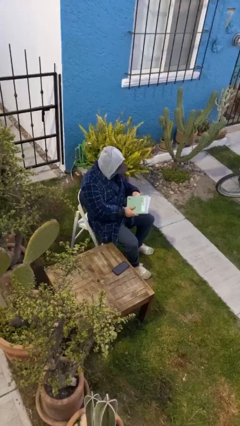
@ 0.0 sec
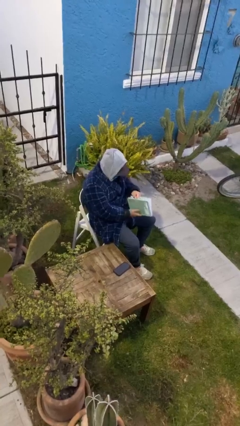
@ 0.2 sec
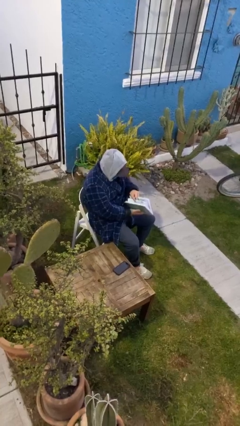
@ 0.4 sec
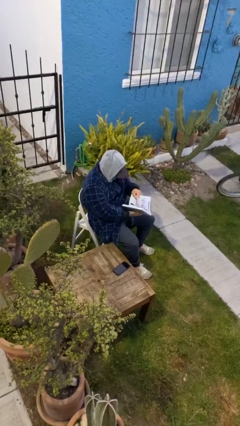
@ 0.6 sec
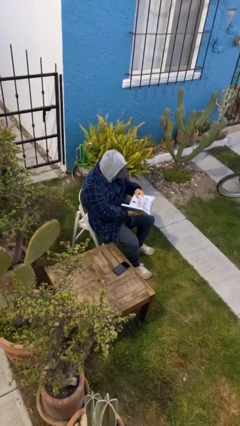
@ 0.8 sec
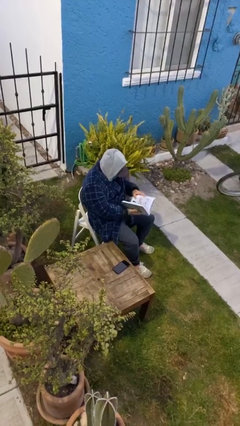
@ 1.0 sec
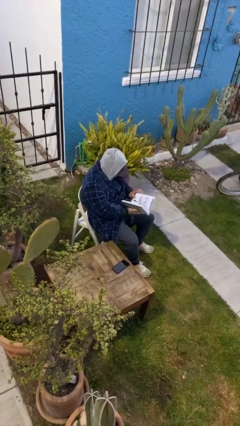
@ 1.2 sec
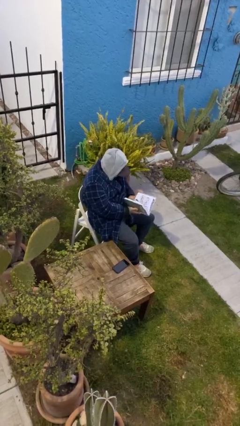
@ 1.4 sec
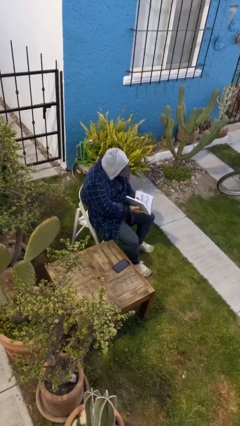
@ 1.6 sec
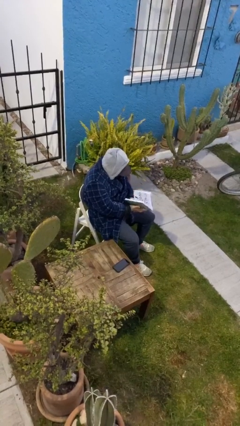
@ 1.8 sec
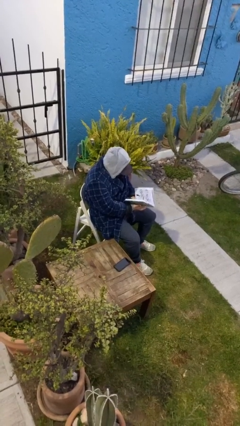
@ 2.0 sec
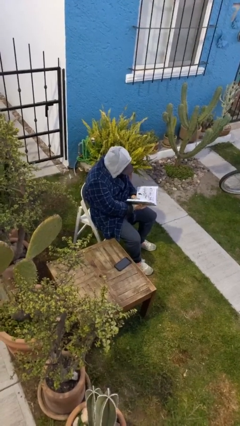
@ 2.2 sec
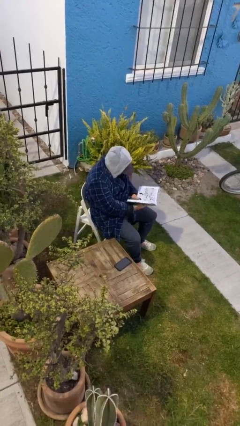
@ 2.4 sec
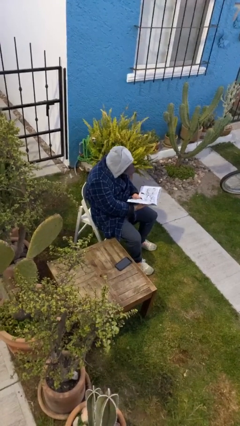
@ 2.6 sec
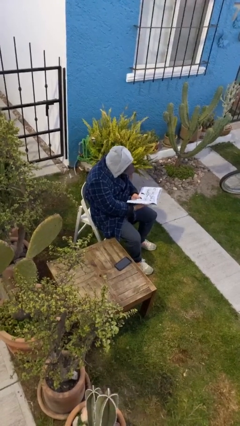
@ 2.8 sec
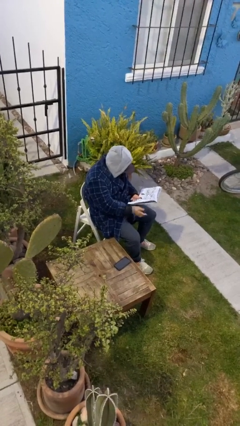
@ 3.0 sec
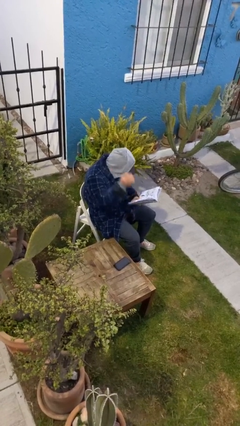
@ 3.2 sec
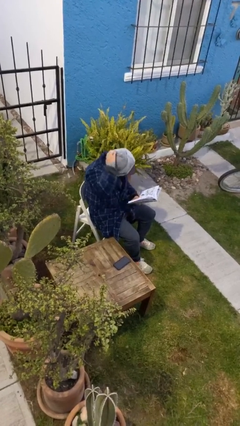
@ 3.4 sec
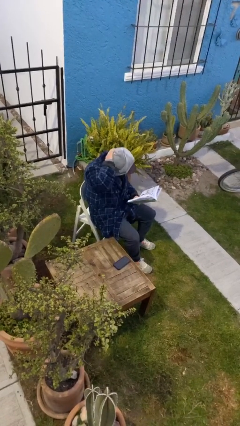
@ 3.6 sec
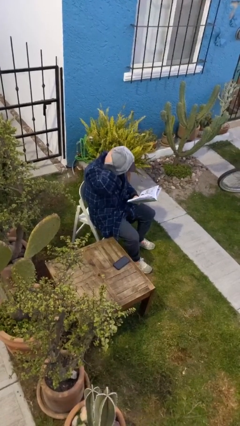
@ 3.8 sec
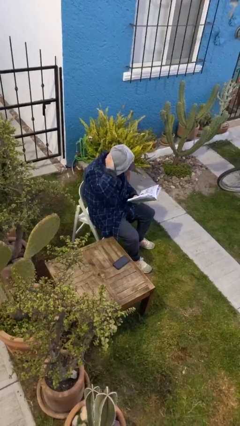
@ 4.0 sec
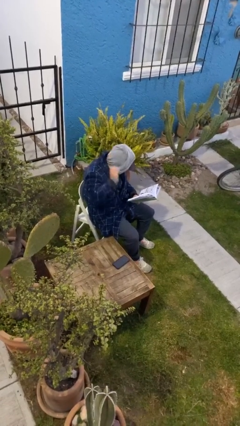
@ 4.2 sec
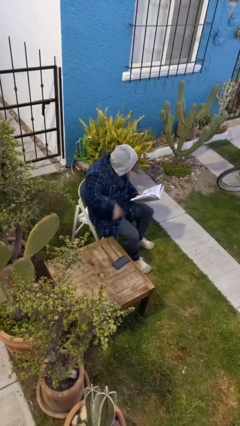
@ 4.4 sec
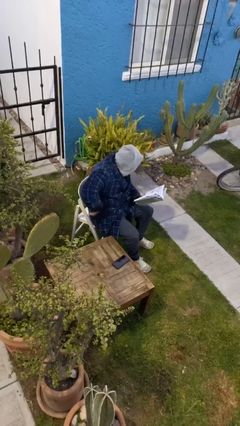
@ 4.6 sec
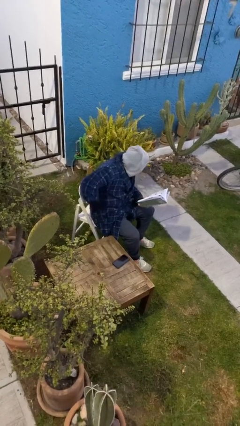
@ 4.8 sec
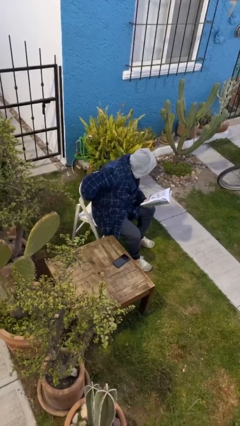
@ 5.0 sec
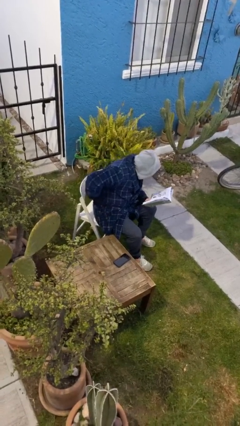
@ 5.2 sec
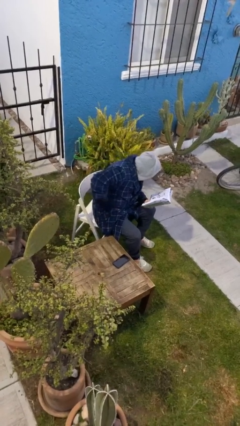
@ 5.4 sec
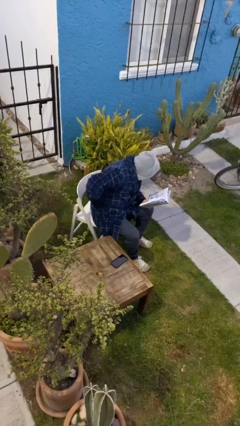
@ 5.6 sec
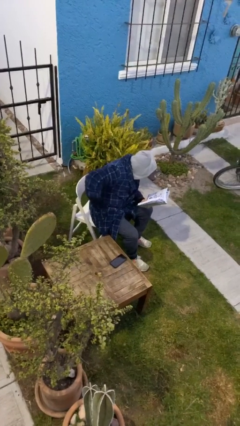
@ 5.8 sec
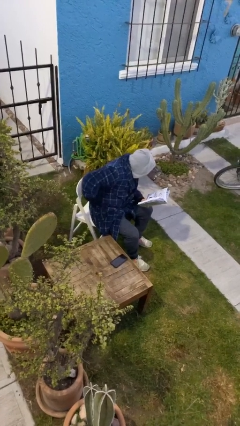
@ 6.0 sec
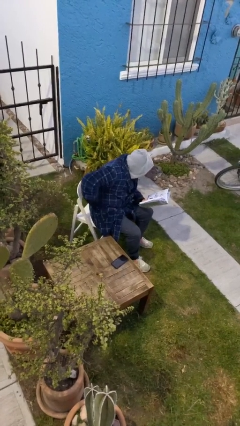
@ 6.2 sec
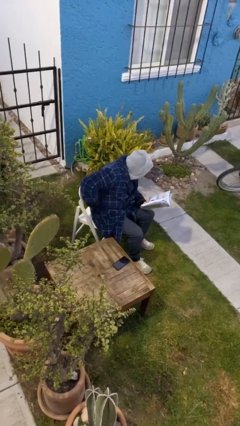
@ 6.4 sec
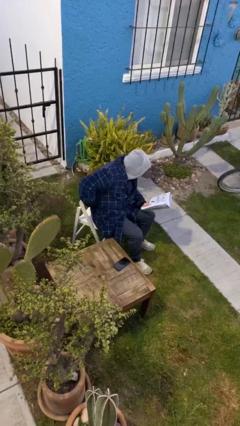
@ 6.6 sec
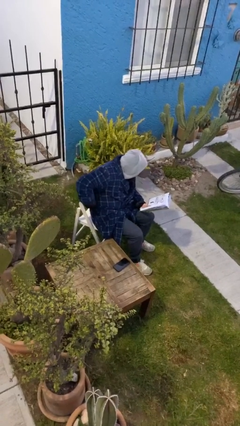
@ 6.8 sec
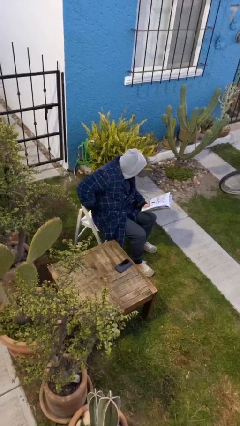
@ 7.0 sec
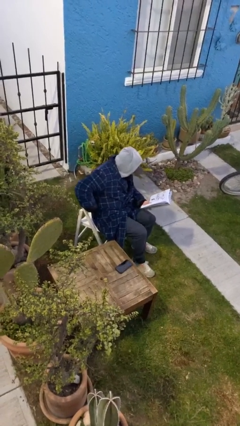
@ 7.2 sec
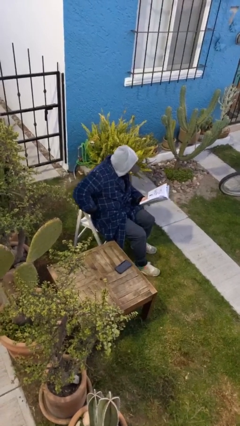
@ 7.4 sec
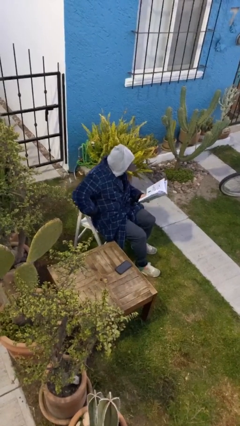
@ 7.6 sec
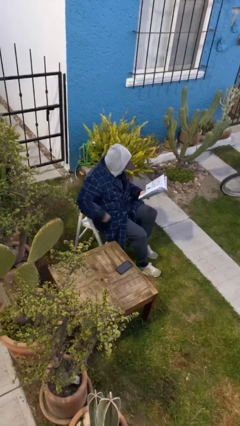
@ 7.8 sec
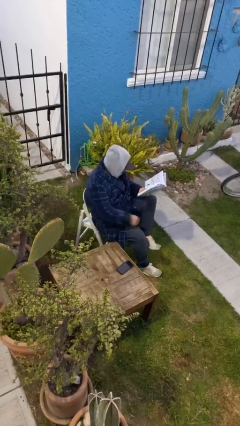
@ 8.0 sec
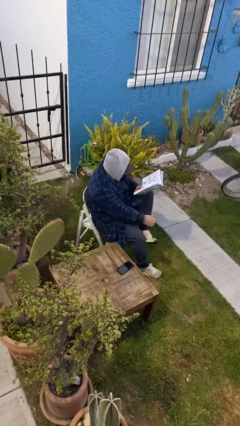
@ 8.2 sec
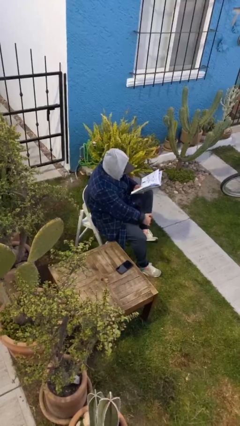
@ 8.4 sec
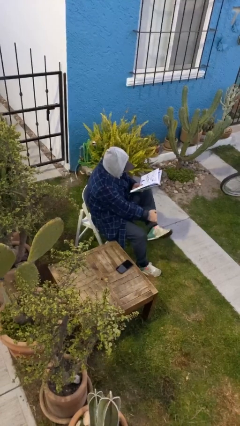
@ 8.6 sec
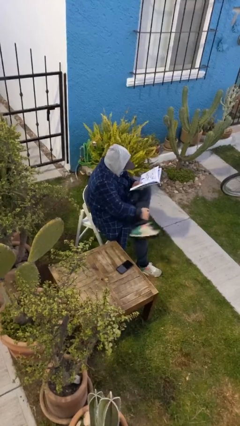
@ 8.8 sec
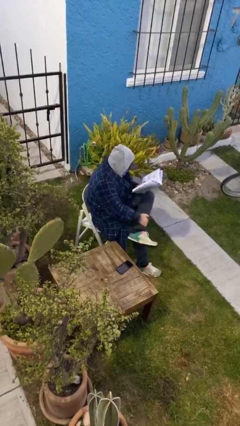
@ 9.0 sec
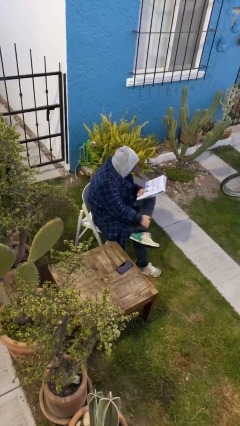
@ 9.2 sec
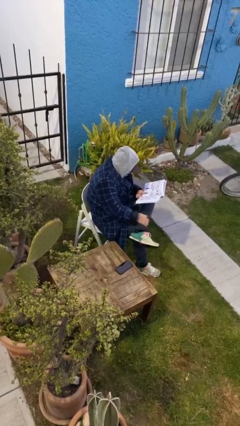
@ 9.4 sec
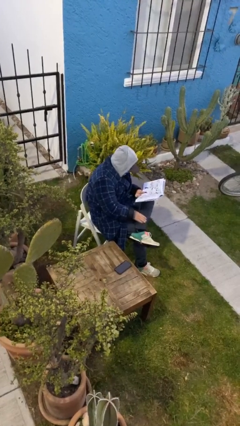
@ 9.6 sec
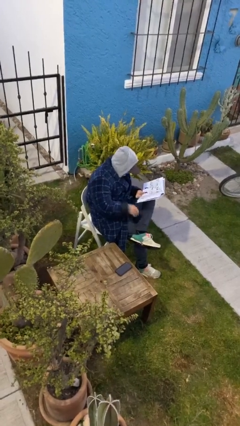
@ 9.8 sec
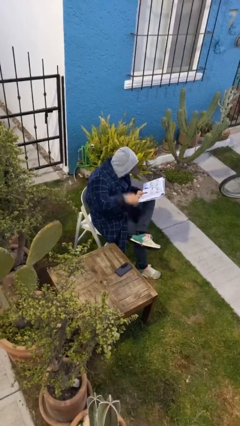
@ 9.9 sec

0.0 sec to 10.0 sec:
person reads document

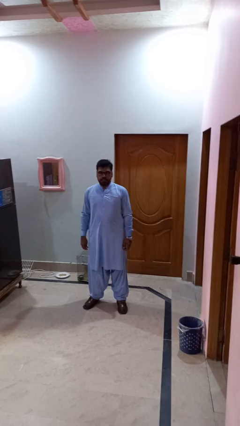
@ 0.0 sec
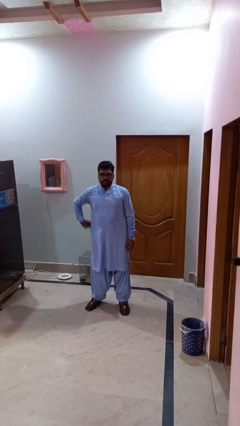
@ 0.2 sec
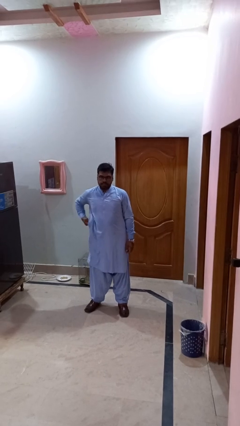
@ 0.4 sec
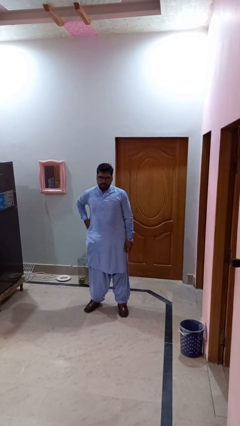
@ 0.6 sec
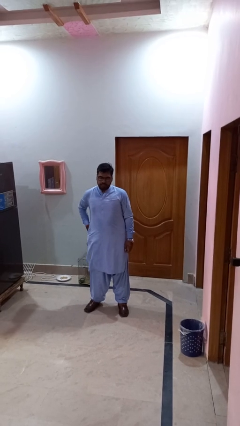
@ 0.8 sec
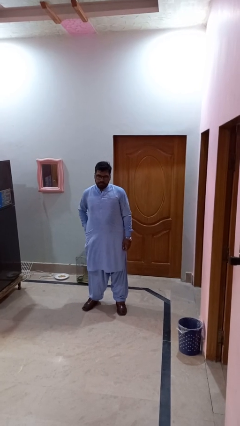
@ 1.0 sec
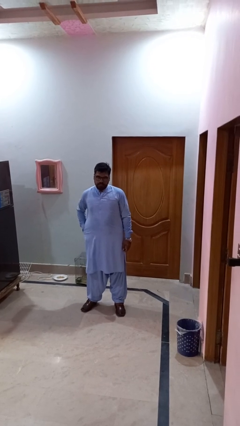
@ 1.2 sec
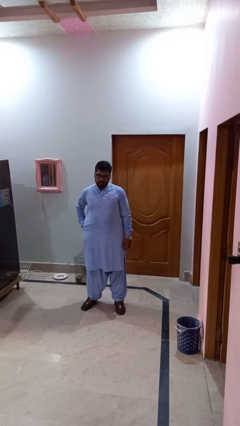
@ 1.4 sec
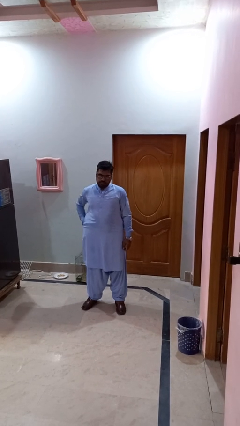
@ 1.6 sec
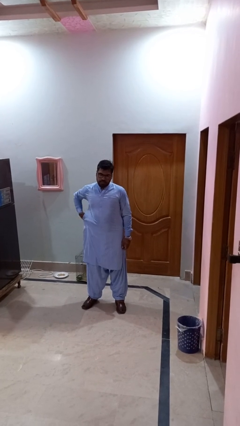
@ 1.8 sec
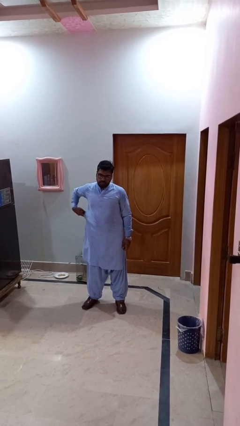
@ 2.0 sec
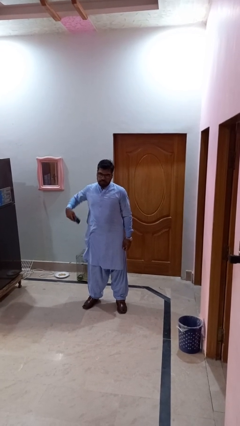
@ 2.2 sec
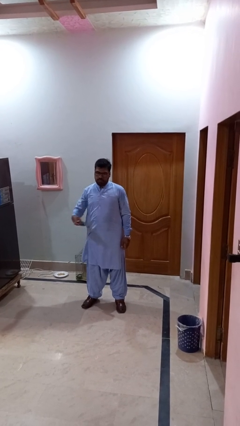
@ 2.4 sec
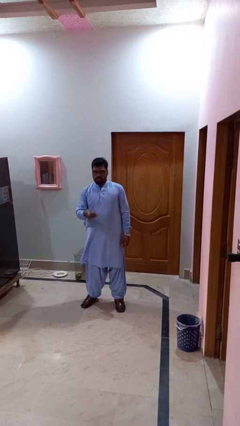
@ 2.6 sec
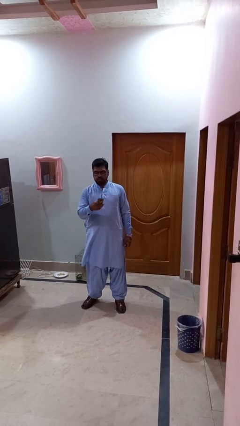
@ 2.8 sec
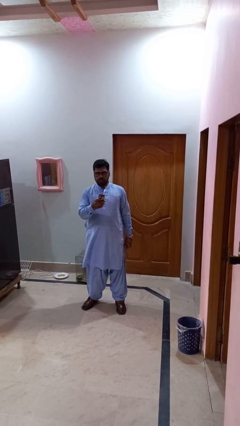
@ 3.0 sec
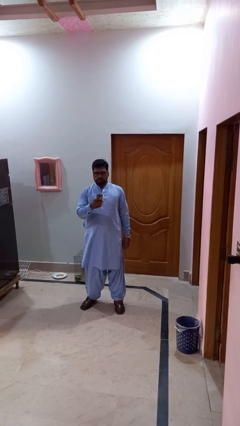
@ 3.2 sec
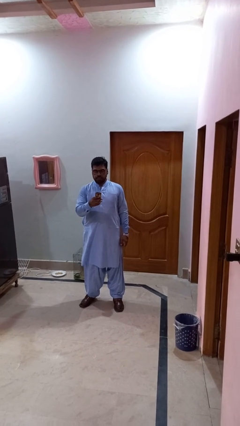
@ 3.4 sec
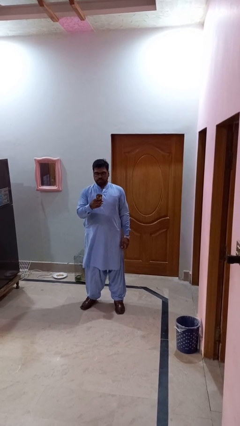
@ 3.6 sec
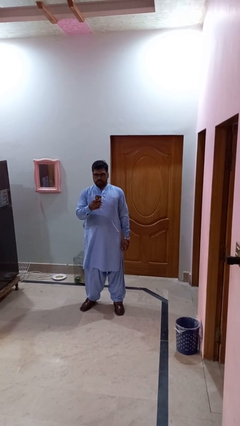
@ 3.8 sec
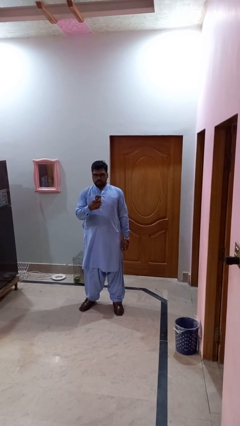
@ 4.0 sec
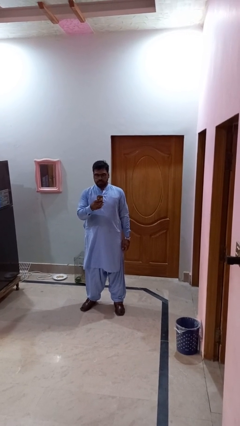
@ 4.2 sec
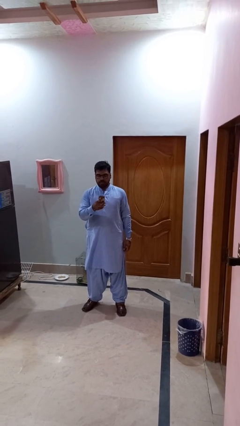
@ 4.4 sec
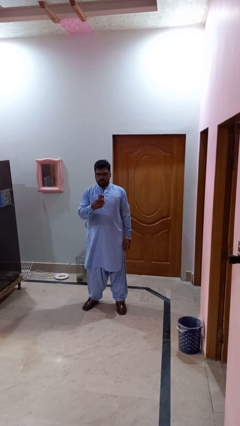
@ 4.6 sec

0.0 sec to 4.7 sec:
person takes phone from pocket

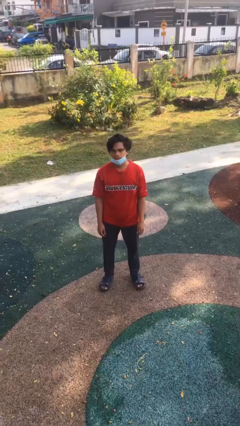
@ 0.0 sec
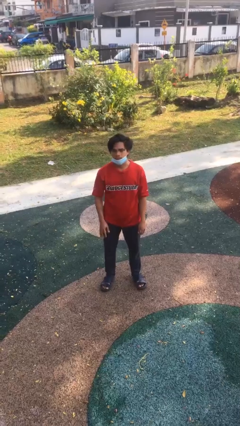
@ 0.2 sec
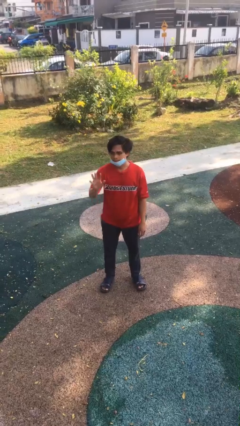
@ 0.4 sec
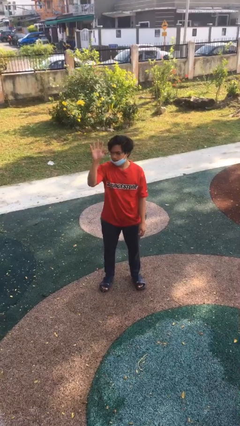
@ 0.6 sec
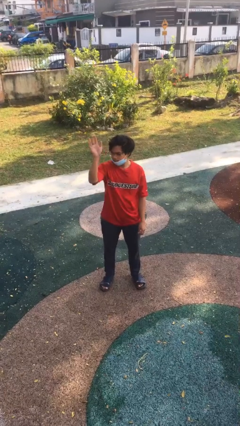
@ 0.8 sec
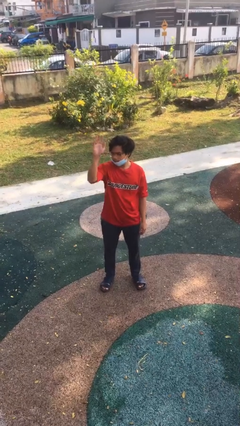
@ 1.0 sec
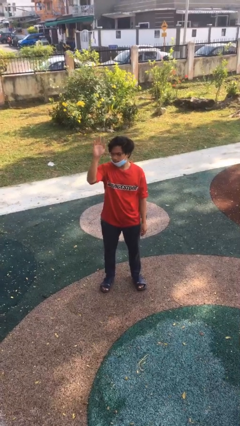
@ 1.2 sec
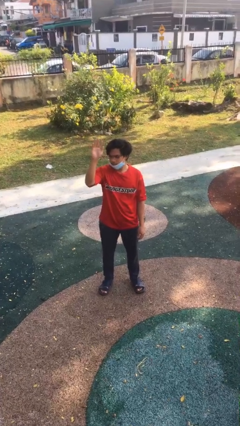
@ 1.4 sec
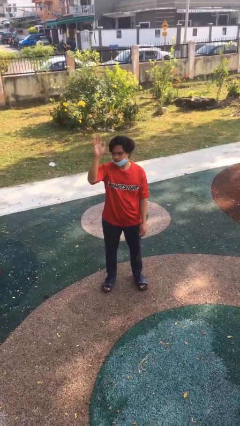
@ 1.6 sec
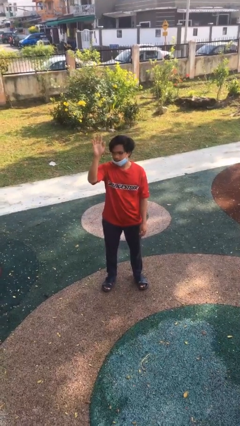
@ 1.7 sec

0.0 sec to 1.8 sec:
person waves at person

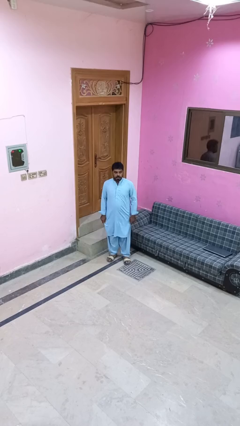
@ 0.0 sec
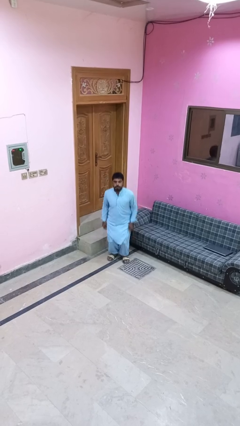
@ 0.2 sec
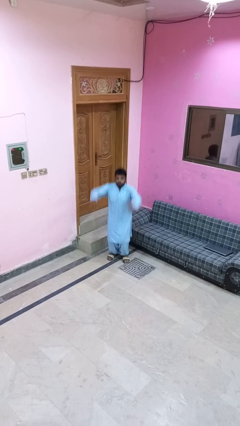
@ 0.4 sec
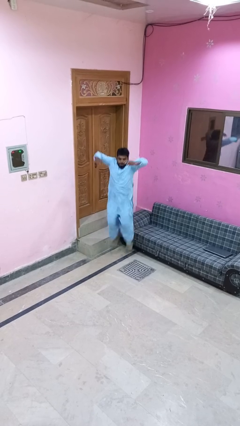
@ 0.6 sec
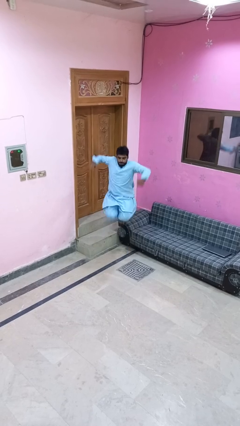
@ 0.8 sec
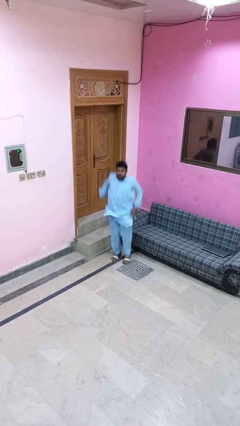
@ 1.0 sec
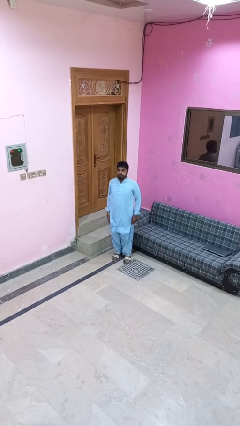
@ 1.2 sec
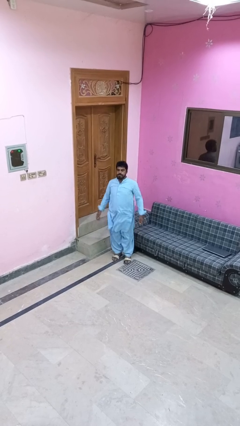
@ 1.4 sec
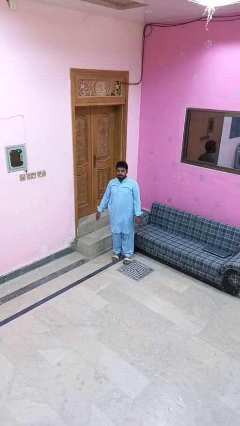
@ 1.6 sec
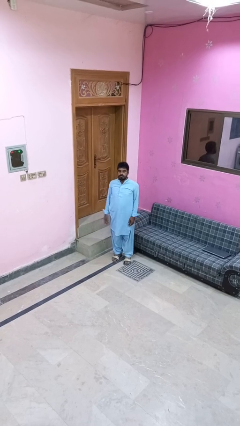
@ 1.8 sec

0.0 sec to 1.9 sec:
person jumps
